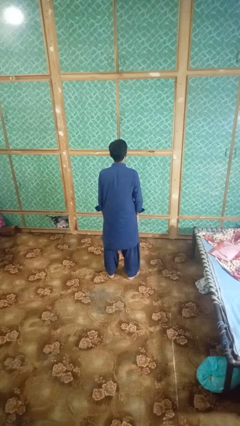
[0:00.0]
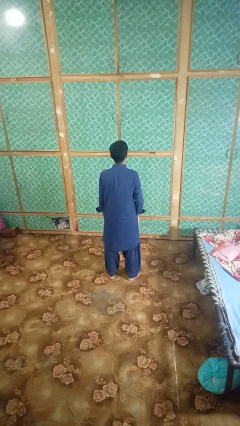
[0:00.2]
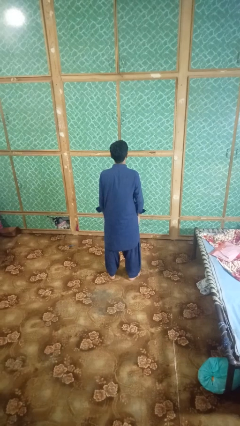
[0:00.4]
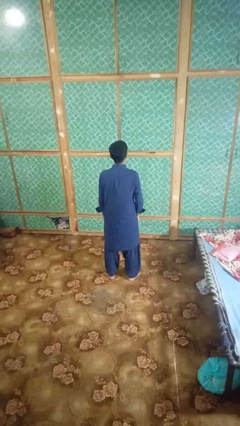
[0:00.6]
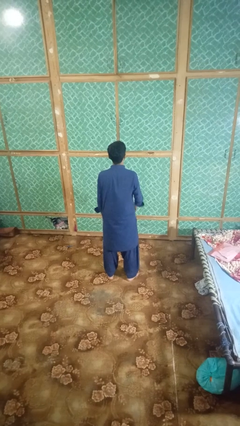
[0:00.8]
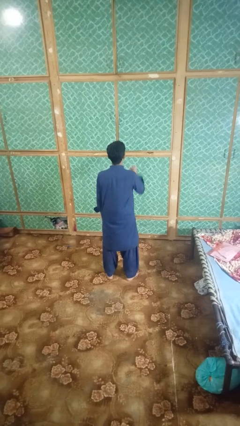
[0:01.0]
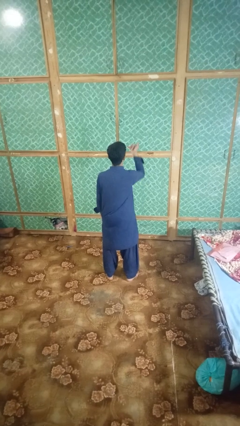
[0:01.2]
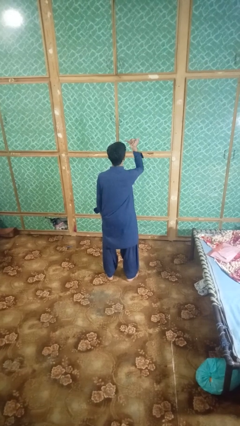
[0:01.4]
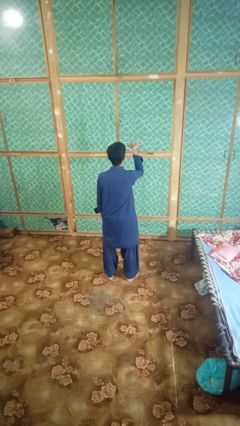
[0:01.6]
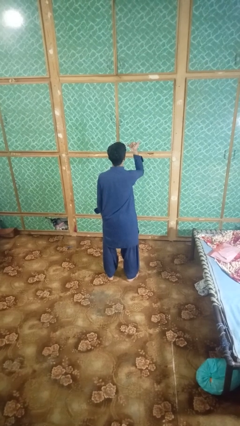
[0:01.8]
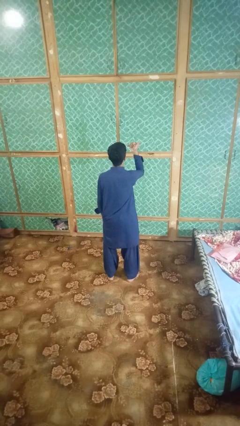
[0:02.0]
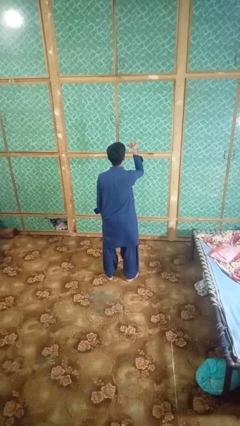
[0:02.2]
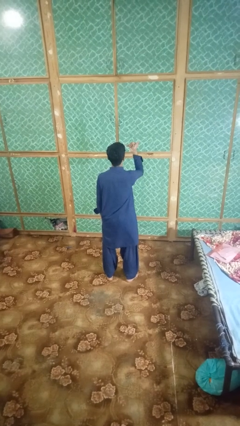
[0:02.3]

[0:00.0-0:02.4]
person gestures hang loose

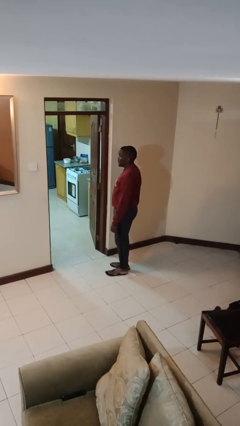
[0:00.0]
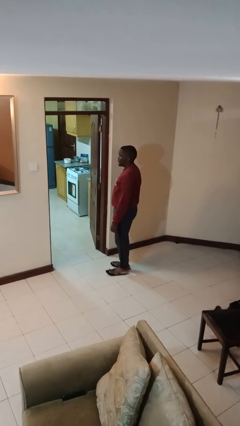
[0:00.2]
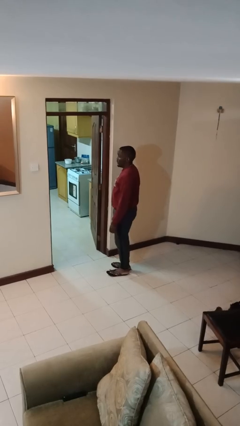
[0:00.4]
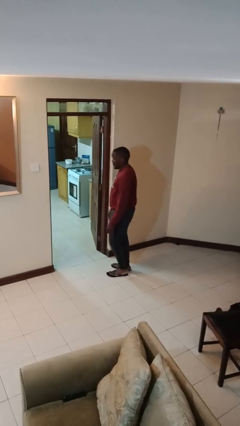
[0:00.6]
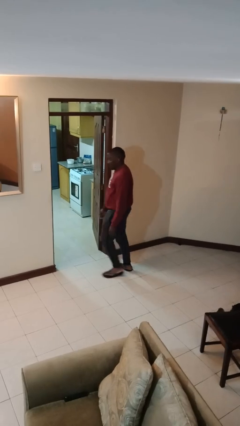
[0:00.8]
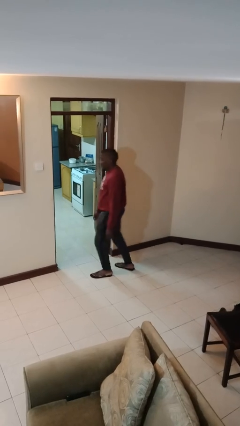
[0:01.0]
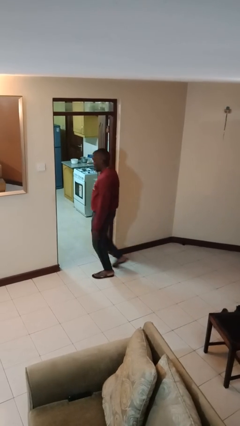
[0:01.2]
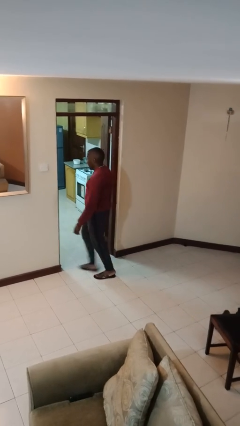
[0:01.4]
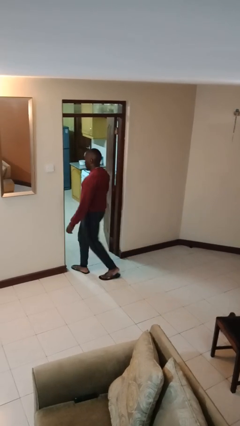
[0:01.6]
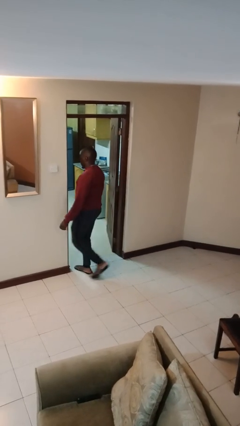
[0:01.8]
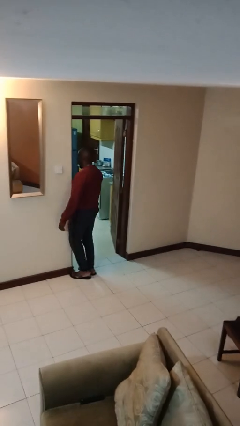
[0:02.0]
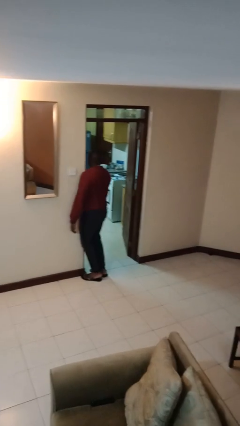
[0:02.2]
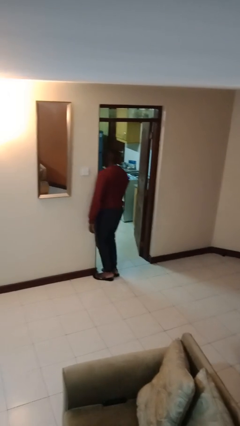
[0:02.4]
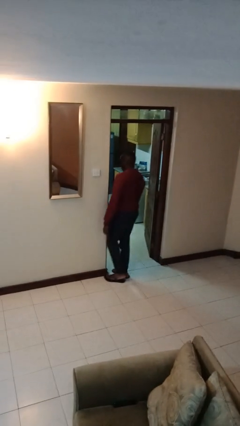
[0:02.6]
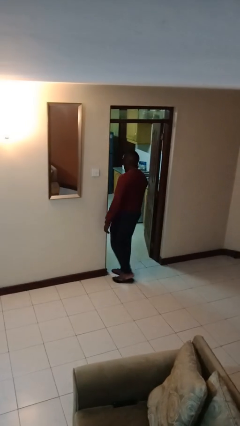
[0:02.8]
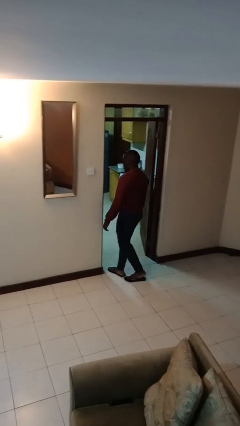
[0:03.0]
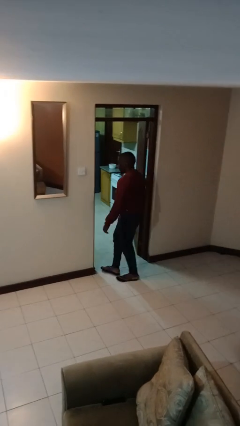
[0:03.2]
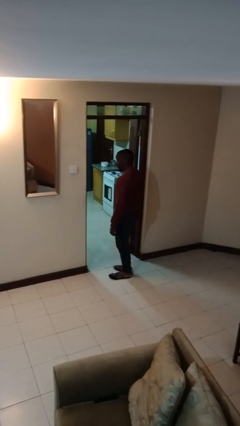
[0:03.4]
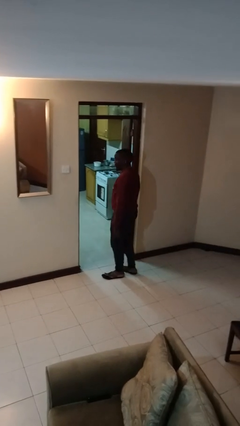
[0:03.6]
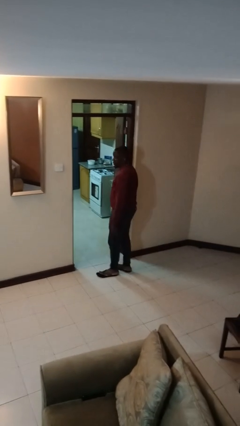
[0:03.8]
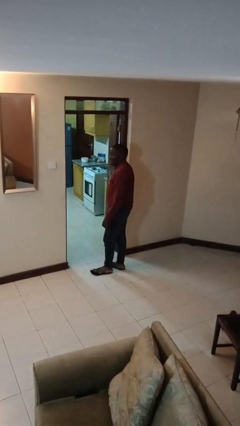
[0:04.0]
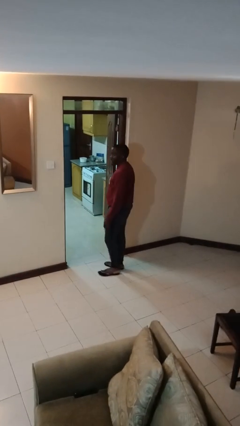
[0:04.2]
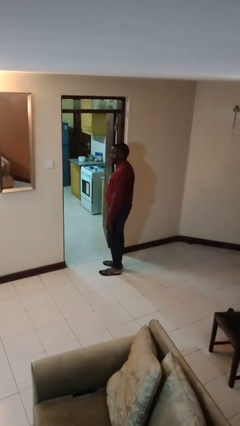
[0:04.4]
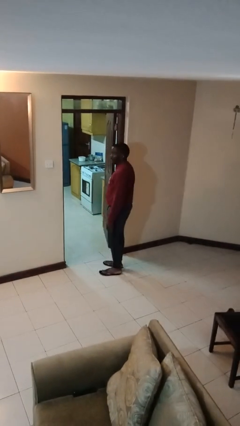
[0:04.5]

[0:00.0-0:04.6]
person bumps into wall

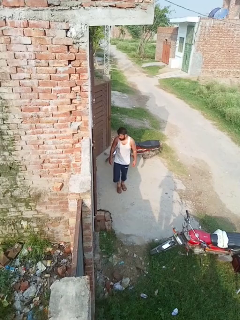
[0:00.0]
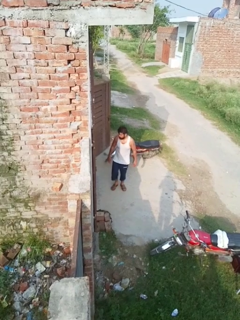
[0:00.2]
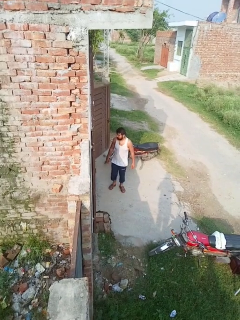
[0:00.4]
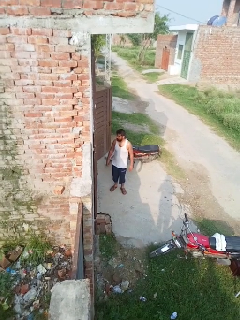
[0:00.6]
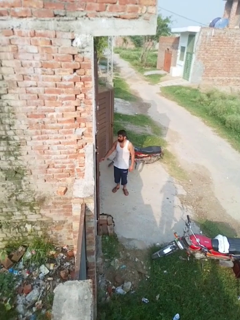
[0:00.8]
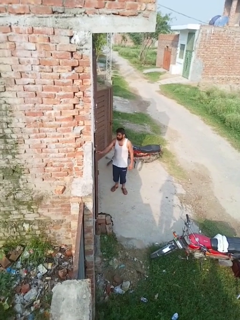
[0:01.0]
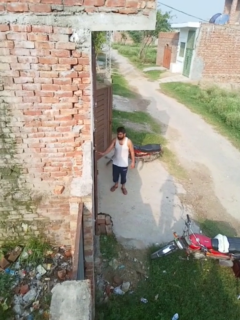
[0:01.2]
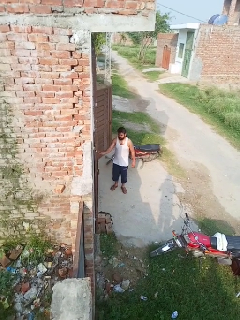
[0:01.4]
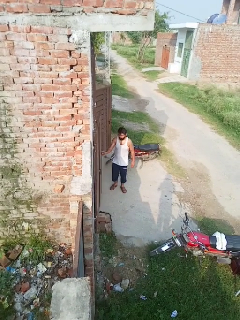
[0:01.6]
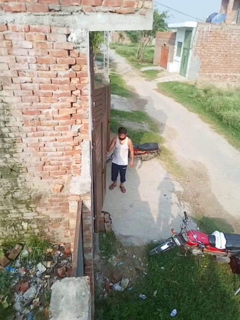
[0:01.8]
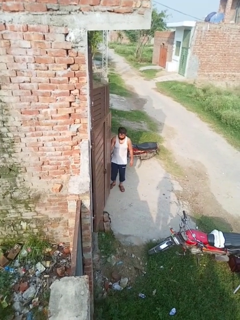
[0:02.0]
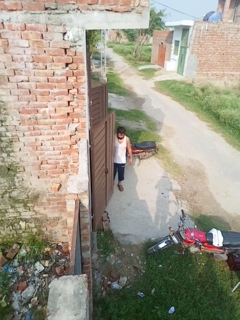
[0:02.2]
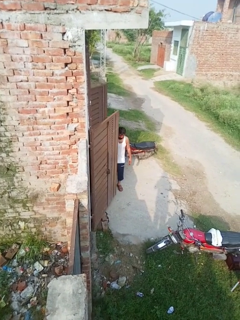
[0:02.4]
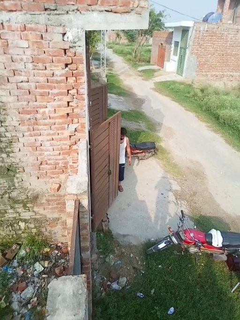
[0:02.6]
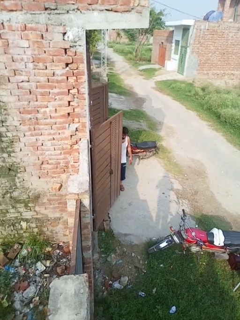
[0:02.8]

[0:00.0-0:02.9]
person opens facility door

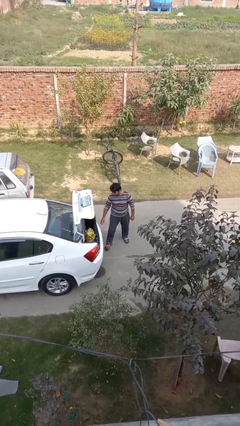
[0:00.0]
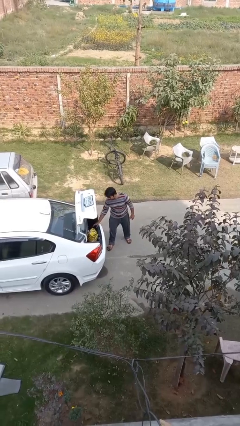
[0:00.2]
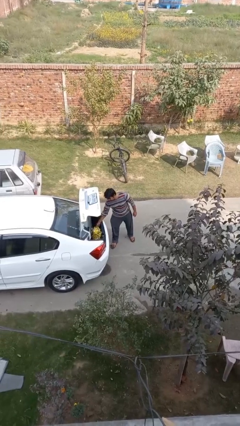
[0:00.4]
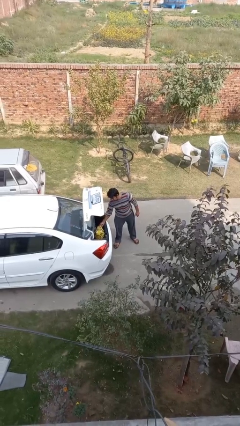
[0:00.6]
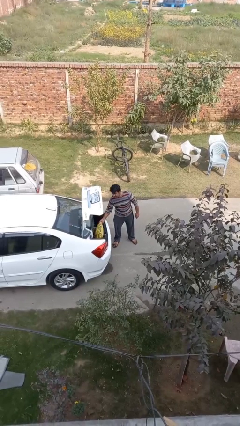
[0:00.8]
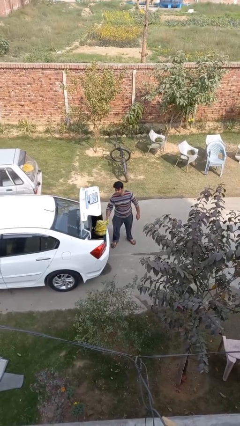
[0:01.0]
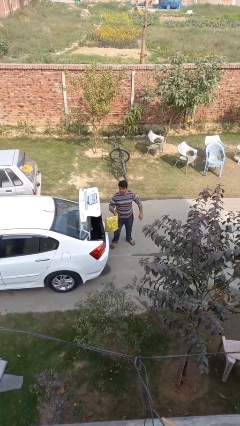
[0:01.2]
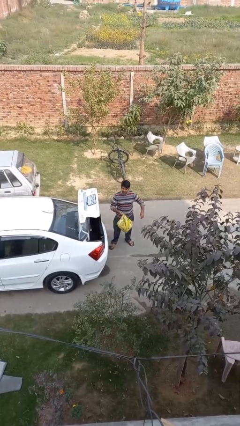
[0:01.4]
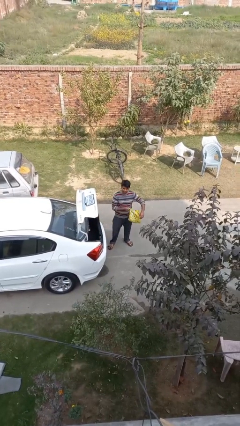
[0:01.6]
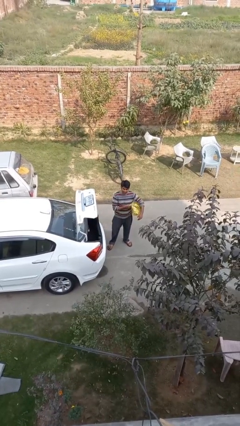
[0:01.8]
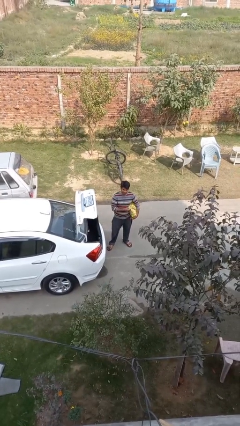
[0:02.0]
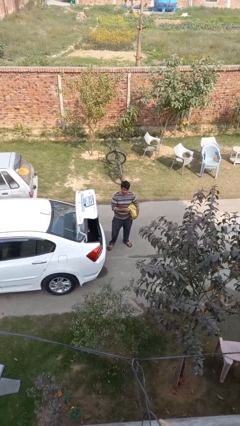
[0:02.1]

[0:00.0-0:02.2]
person unloads car

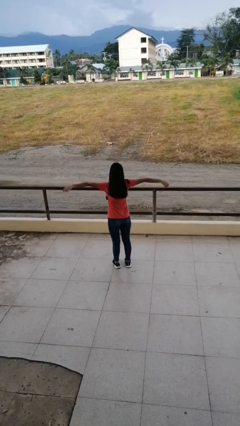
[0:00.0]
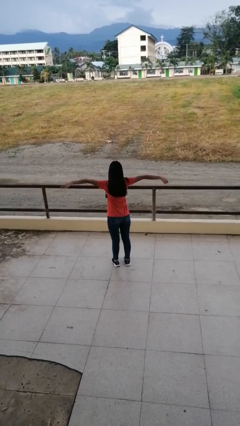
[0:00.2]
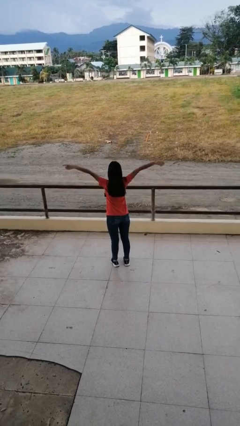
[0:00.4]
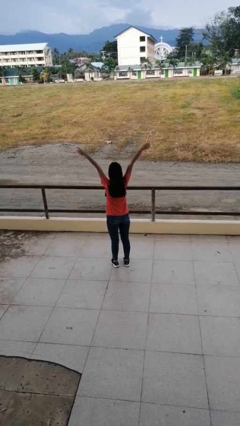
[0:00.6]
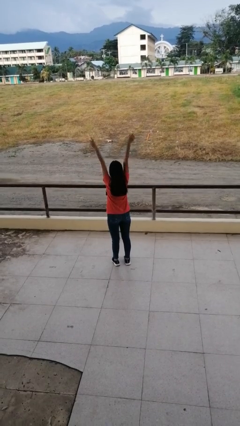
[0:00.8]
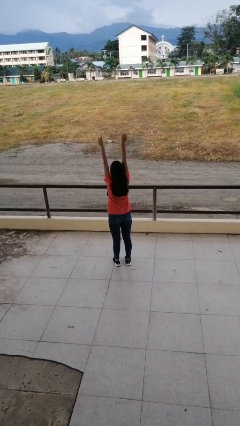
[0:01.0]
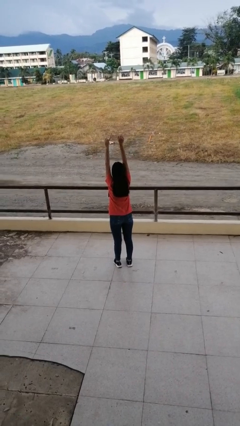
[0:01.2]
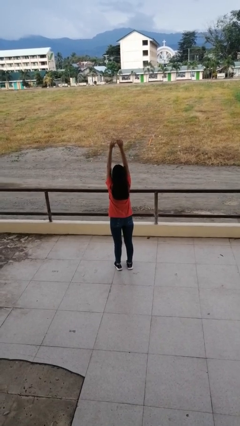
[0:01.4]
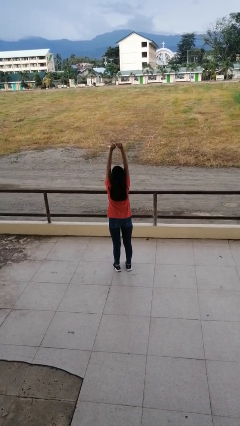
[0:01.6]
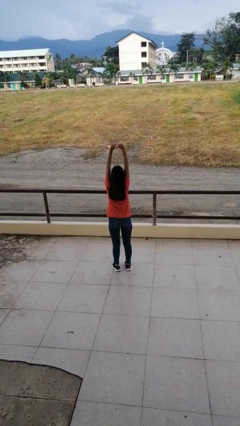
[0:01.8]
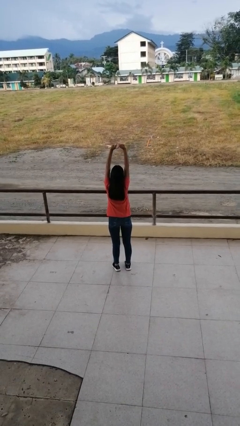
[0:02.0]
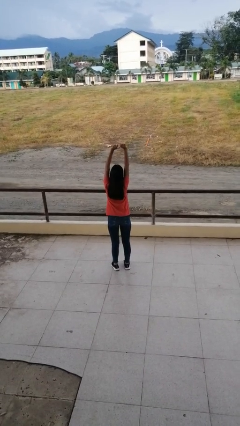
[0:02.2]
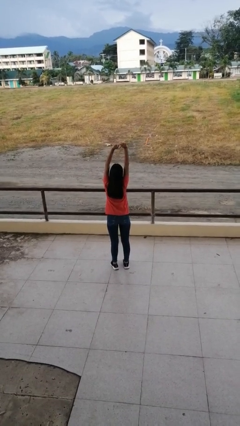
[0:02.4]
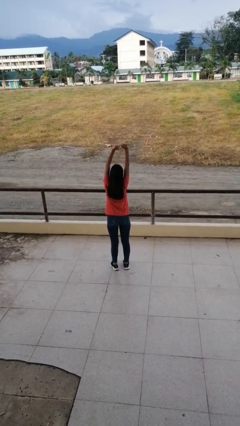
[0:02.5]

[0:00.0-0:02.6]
person stretches arms over head

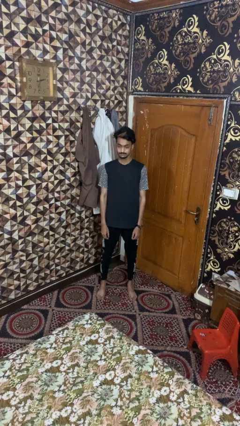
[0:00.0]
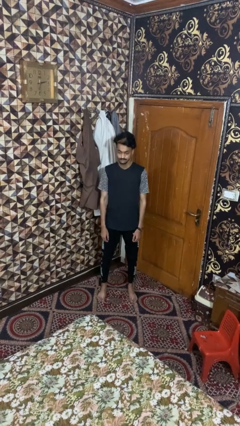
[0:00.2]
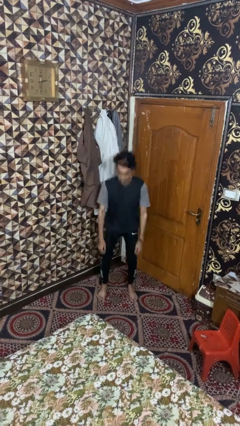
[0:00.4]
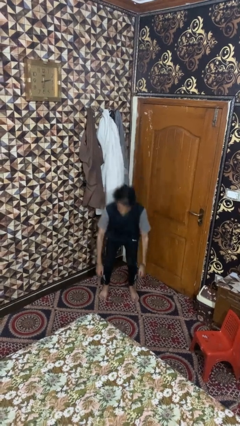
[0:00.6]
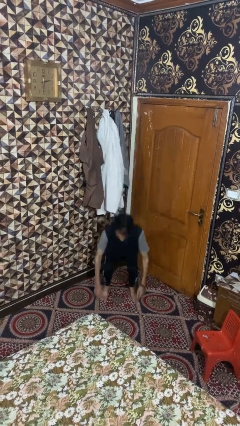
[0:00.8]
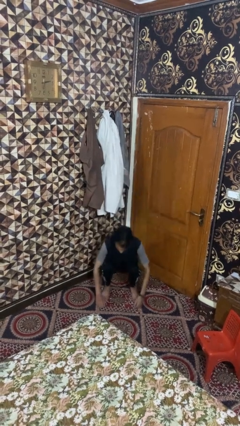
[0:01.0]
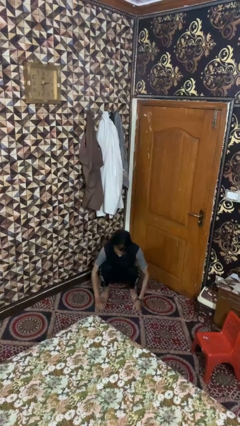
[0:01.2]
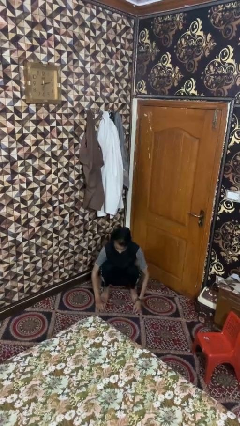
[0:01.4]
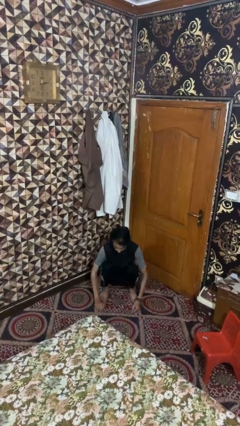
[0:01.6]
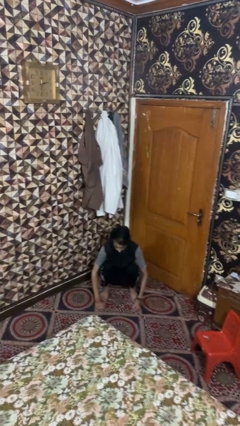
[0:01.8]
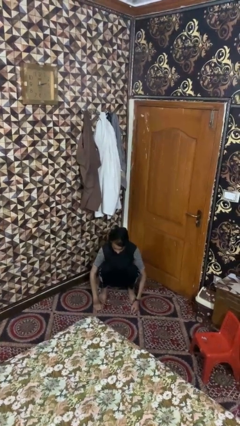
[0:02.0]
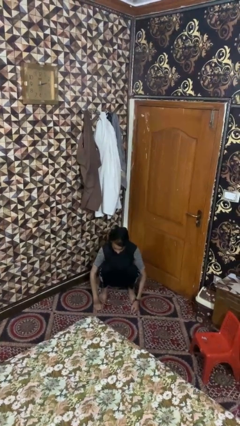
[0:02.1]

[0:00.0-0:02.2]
person squats

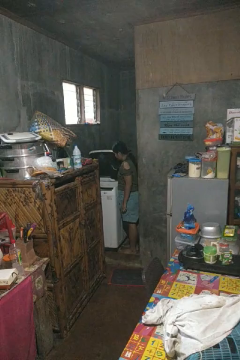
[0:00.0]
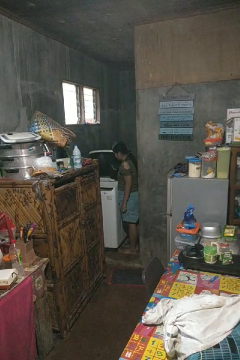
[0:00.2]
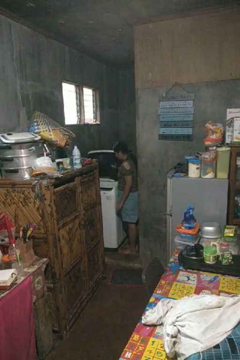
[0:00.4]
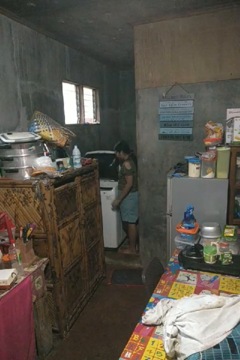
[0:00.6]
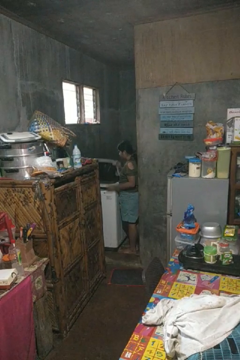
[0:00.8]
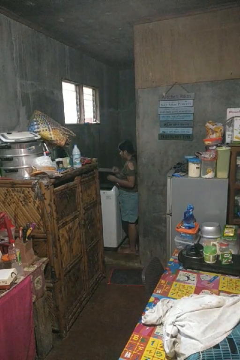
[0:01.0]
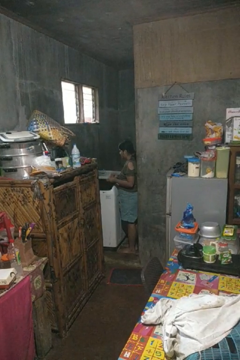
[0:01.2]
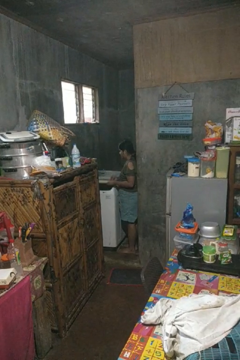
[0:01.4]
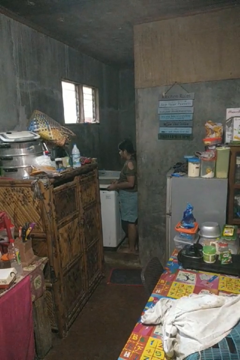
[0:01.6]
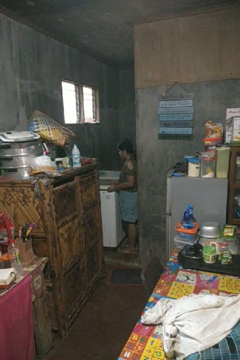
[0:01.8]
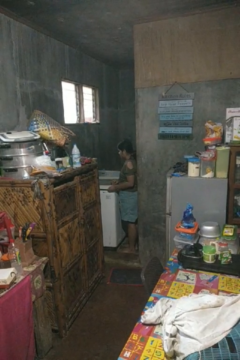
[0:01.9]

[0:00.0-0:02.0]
person closes clothes washer
